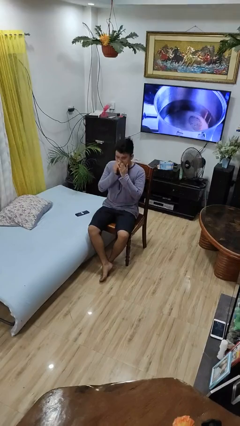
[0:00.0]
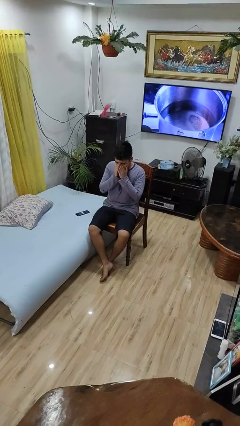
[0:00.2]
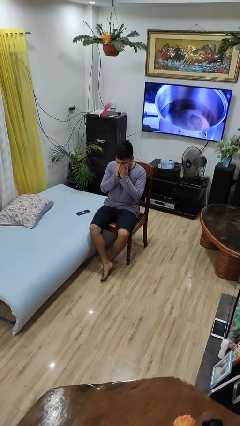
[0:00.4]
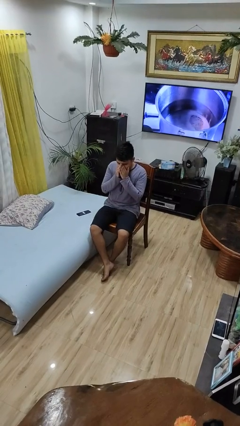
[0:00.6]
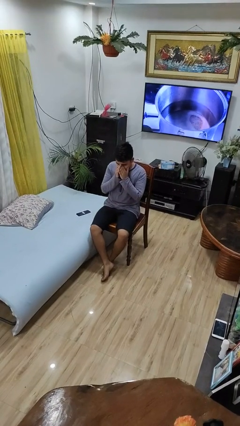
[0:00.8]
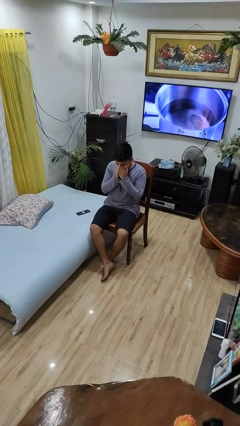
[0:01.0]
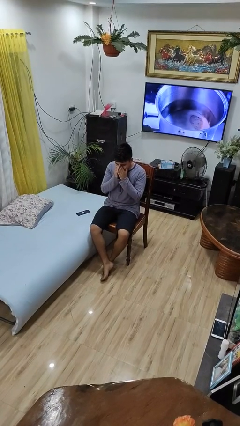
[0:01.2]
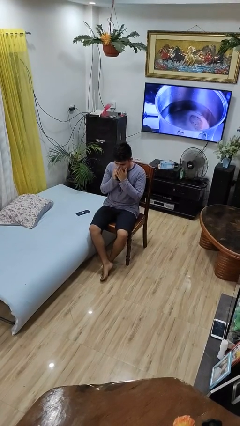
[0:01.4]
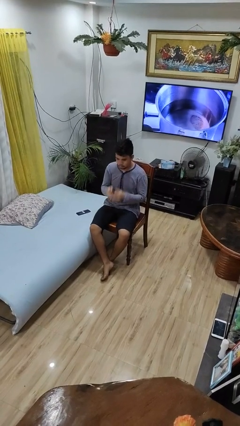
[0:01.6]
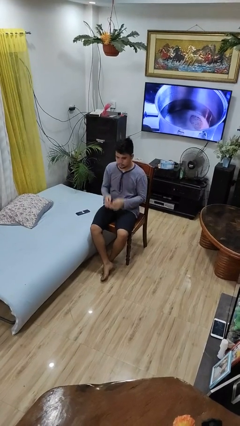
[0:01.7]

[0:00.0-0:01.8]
person sneezes into hand

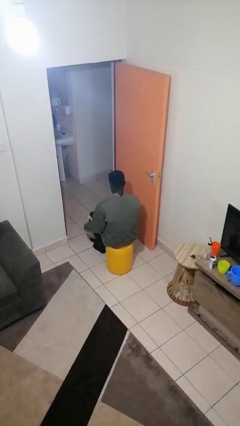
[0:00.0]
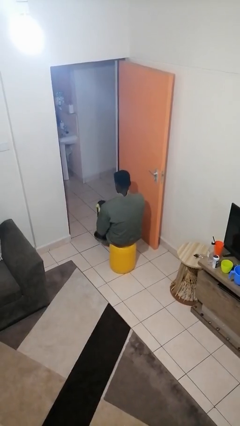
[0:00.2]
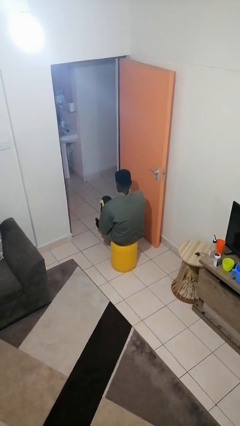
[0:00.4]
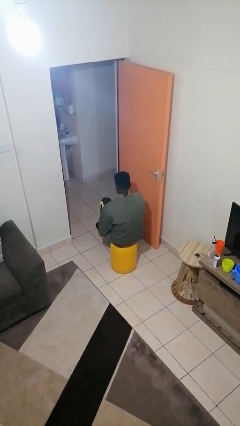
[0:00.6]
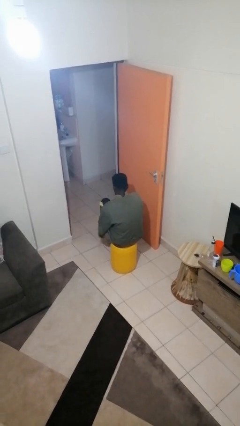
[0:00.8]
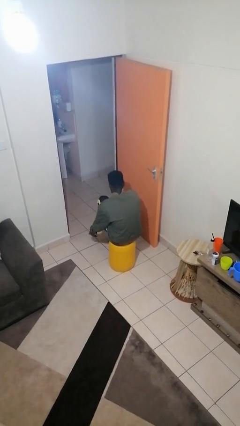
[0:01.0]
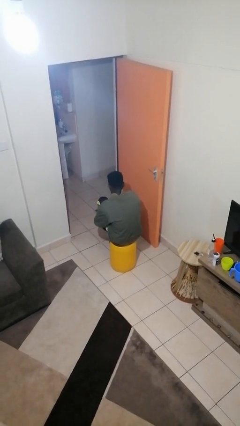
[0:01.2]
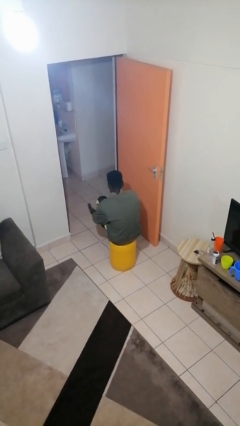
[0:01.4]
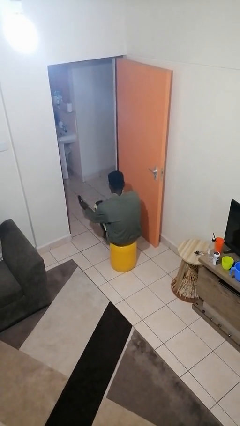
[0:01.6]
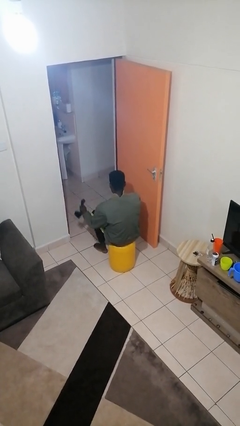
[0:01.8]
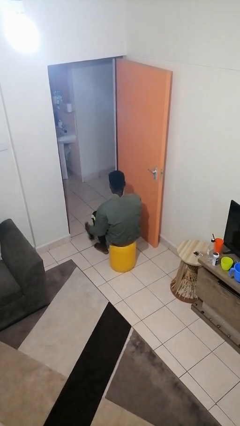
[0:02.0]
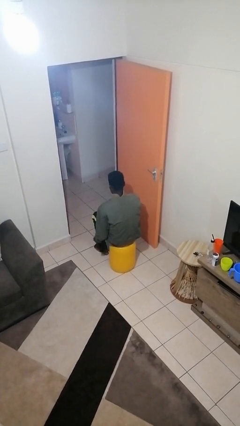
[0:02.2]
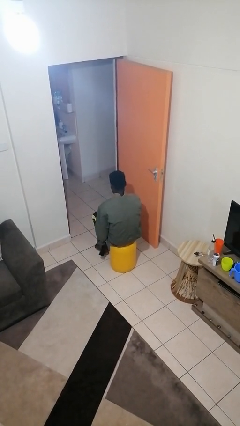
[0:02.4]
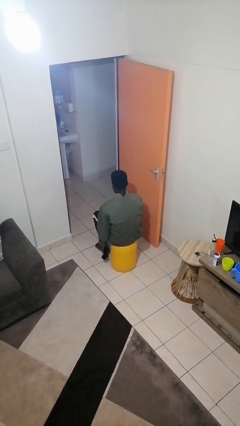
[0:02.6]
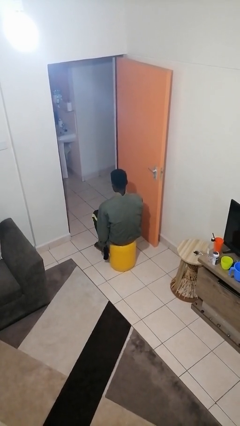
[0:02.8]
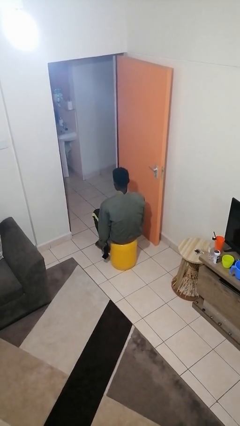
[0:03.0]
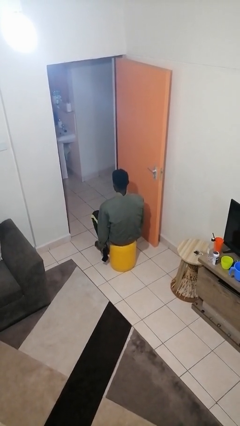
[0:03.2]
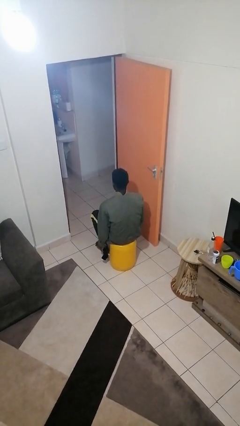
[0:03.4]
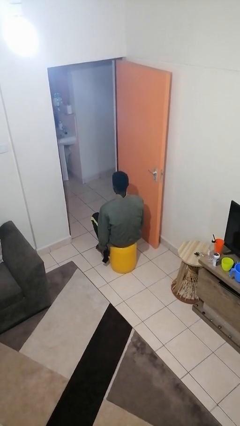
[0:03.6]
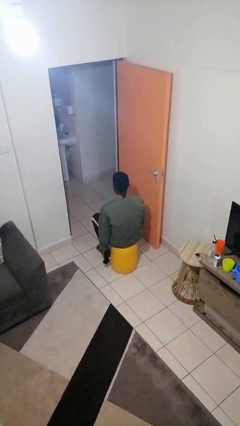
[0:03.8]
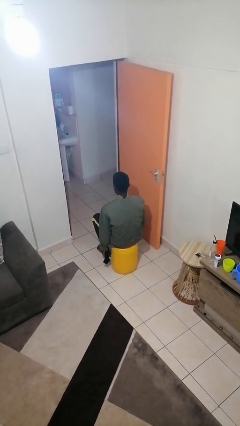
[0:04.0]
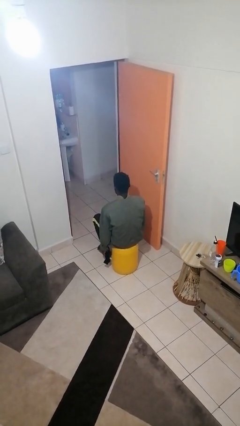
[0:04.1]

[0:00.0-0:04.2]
person takes off socks

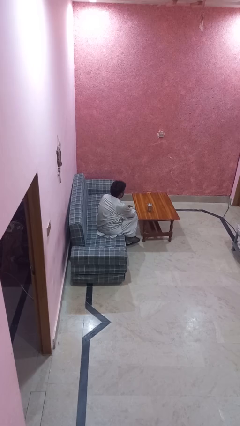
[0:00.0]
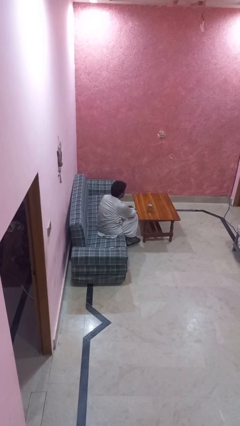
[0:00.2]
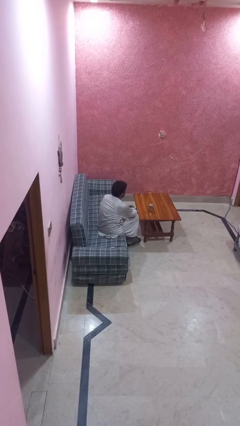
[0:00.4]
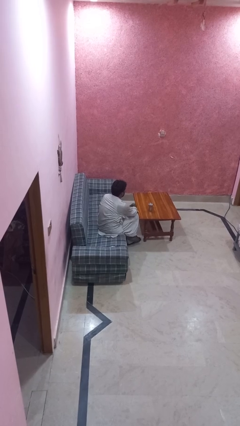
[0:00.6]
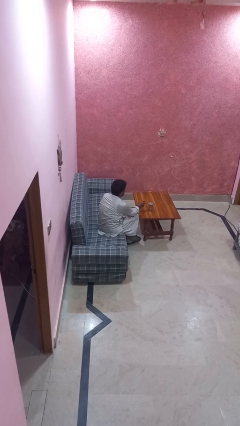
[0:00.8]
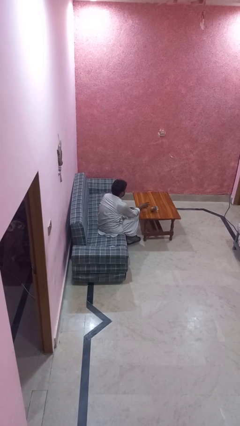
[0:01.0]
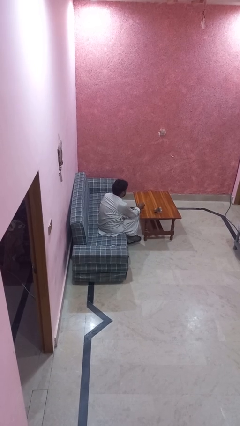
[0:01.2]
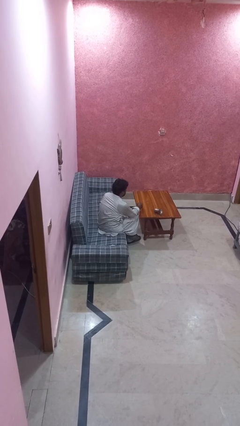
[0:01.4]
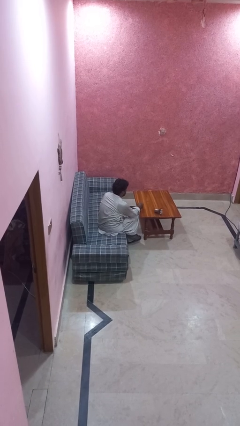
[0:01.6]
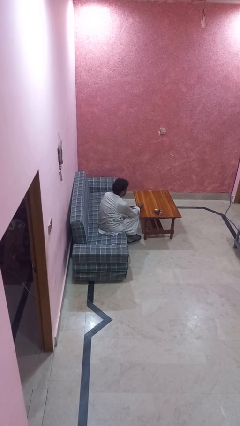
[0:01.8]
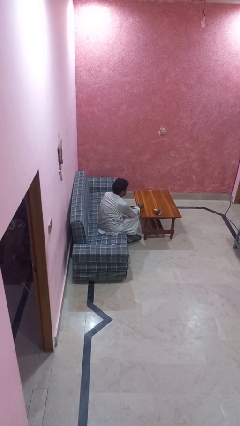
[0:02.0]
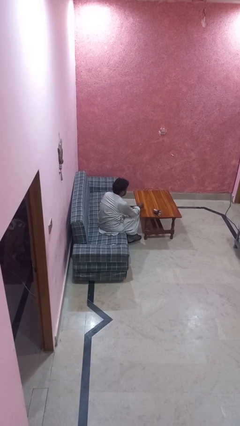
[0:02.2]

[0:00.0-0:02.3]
person knocks over glass

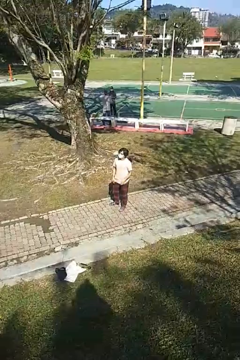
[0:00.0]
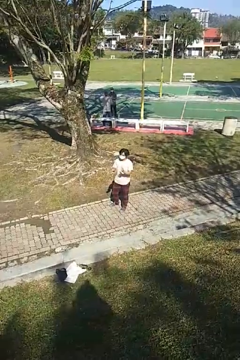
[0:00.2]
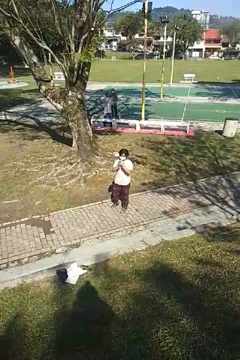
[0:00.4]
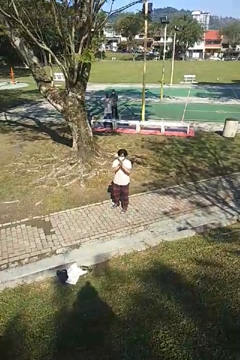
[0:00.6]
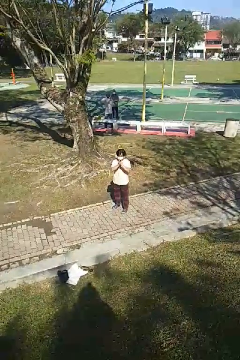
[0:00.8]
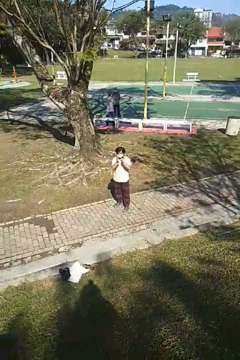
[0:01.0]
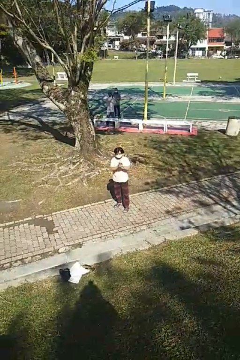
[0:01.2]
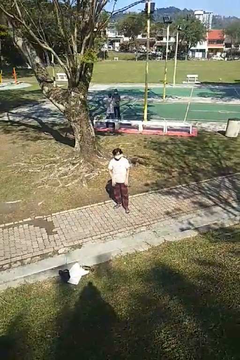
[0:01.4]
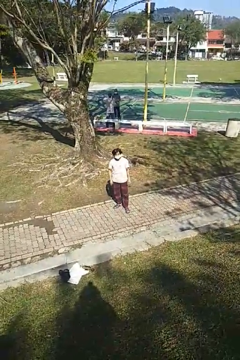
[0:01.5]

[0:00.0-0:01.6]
person claps hands

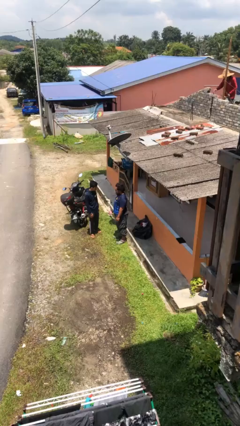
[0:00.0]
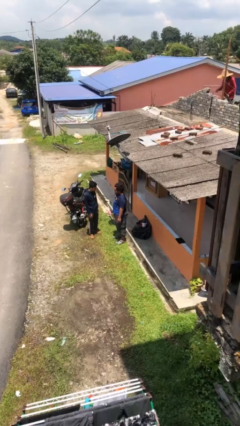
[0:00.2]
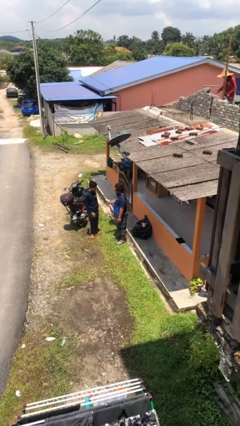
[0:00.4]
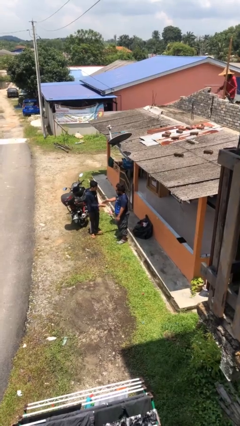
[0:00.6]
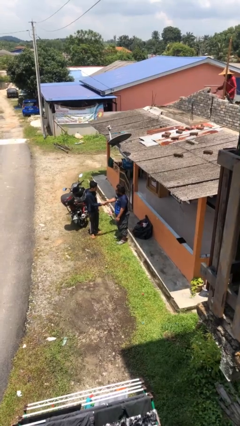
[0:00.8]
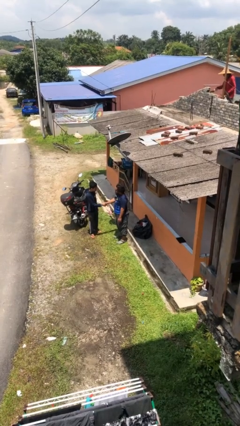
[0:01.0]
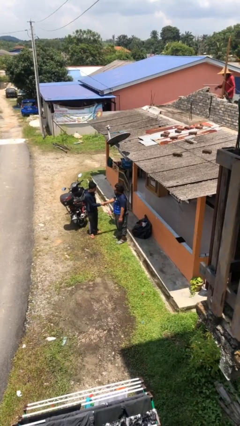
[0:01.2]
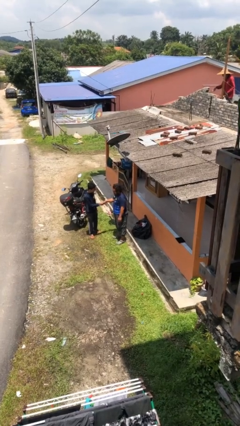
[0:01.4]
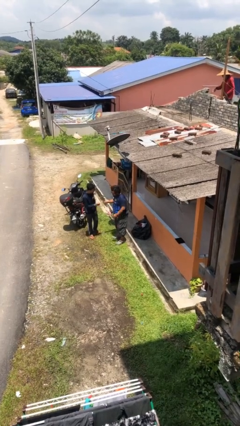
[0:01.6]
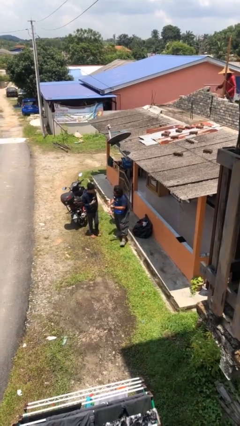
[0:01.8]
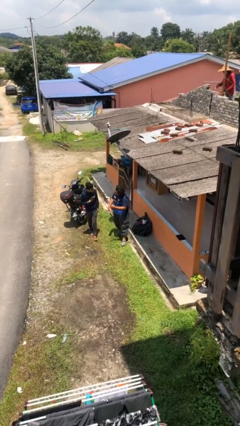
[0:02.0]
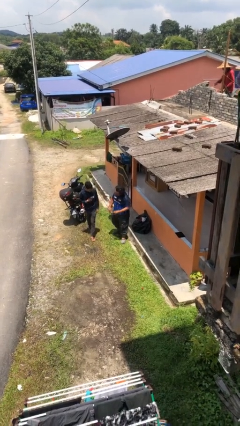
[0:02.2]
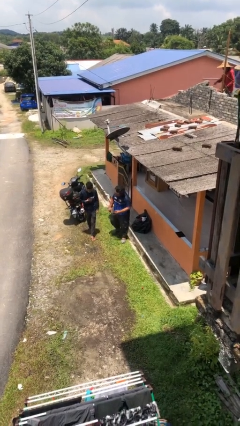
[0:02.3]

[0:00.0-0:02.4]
person shakes hand

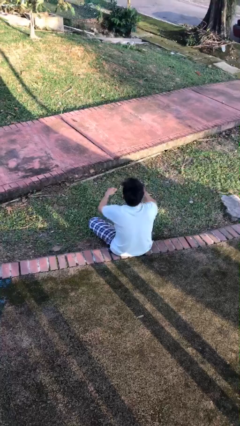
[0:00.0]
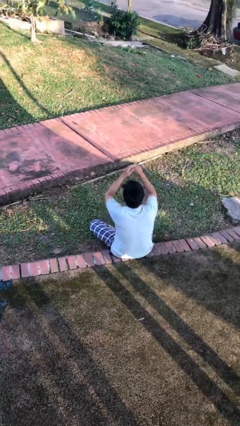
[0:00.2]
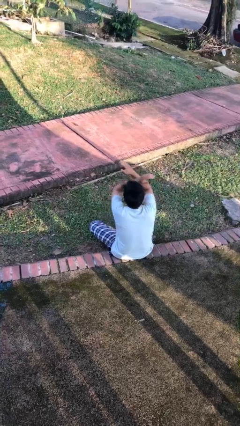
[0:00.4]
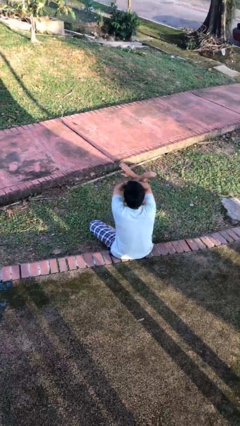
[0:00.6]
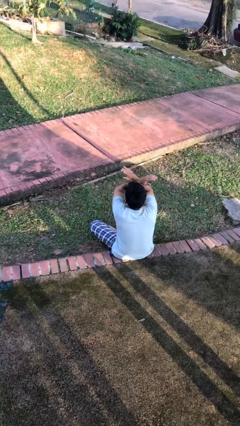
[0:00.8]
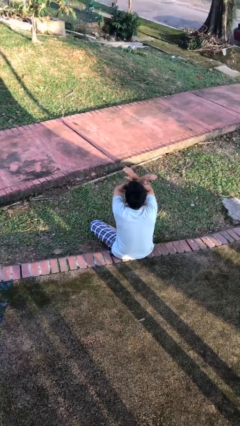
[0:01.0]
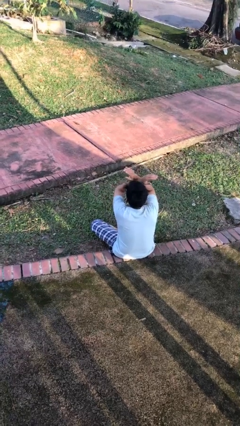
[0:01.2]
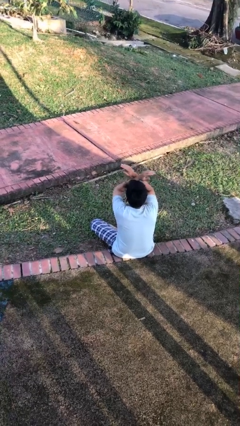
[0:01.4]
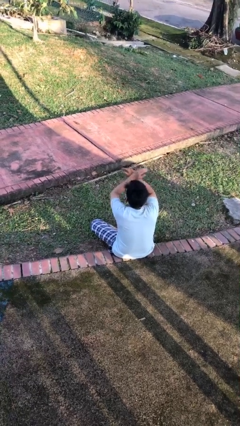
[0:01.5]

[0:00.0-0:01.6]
person gestures arms x

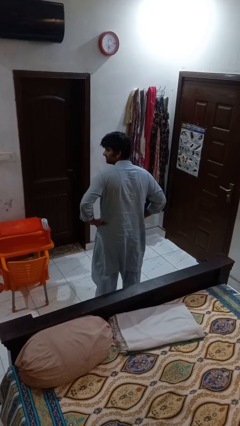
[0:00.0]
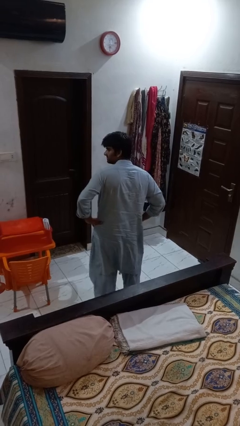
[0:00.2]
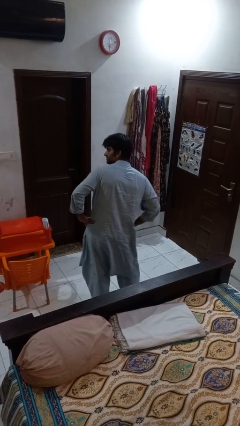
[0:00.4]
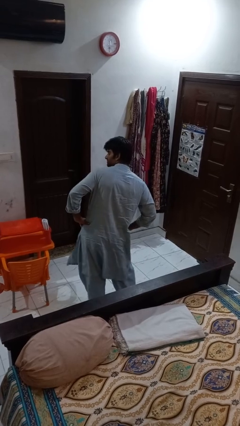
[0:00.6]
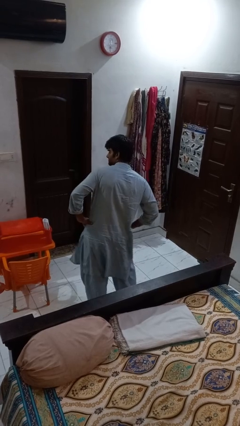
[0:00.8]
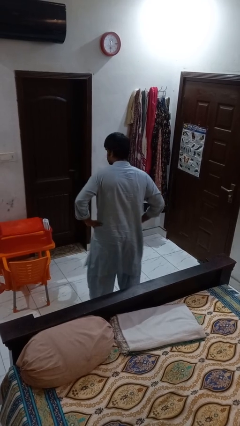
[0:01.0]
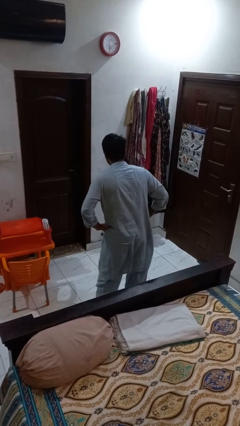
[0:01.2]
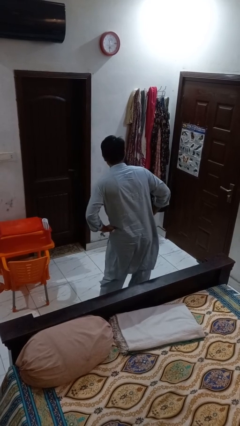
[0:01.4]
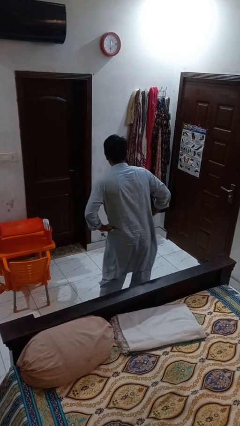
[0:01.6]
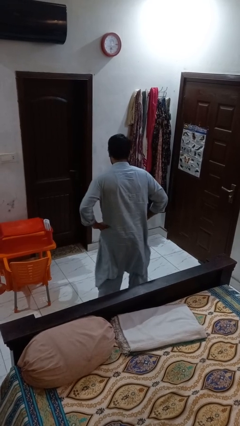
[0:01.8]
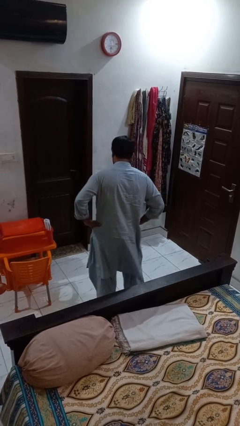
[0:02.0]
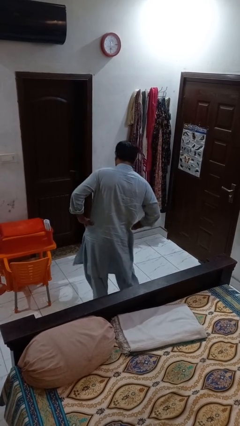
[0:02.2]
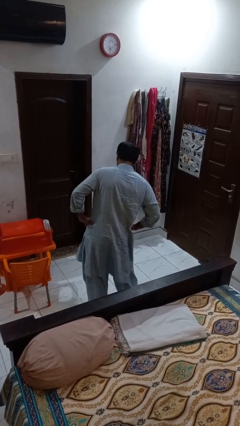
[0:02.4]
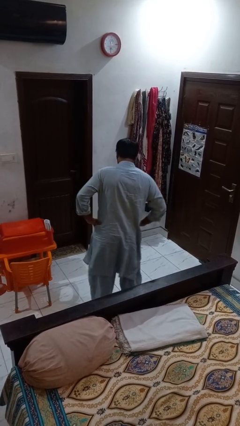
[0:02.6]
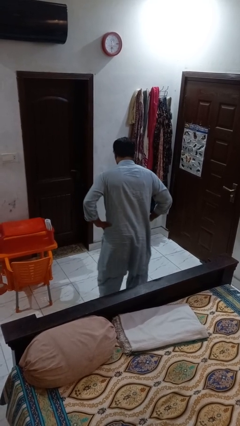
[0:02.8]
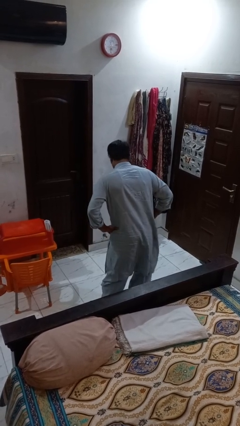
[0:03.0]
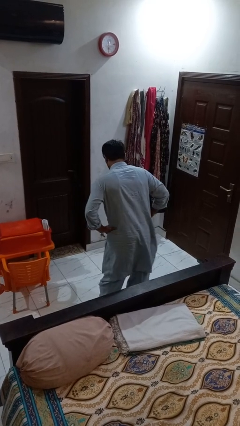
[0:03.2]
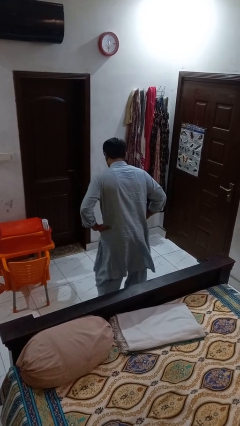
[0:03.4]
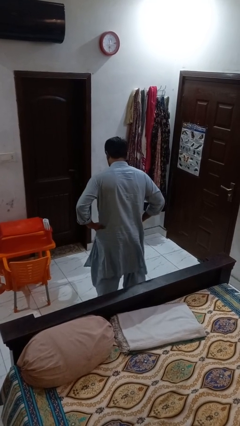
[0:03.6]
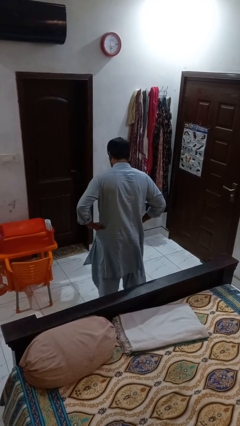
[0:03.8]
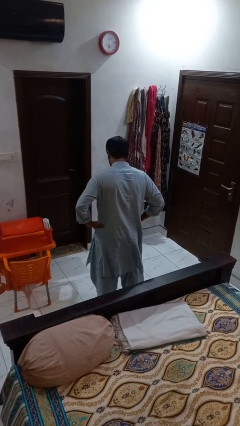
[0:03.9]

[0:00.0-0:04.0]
person wiggles hips
